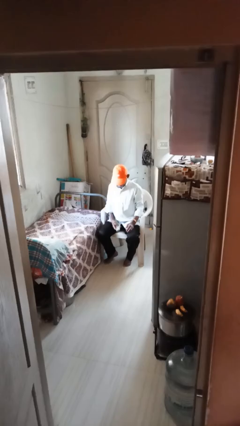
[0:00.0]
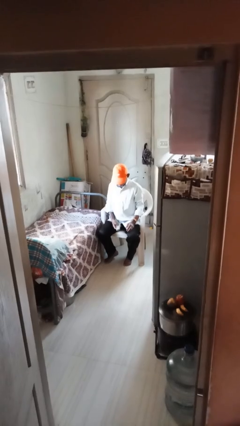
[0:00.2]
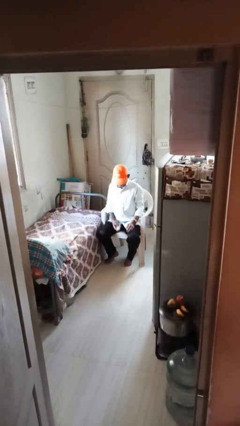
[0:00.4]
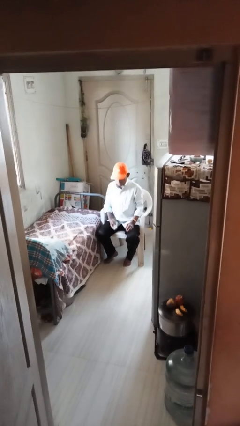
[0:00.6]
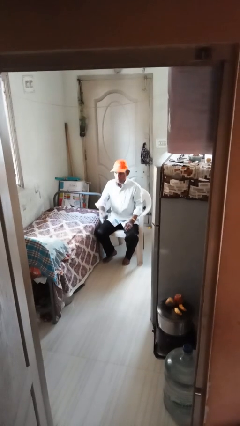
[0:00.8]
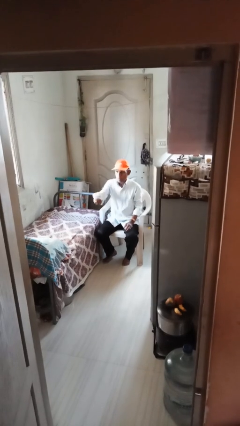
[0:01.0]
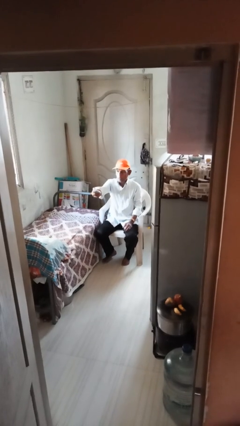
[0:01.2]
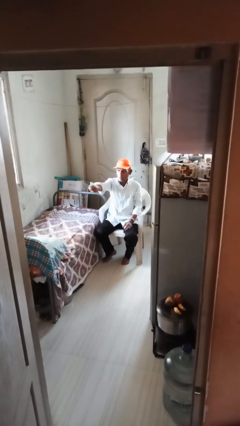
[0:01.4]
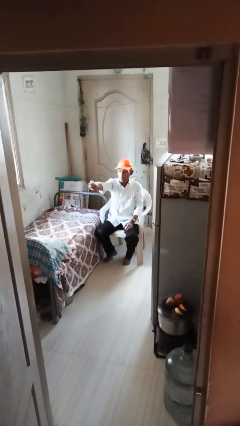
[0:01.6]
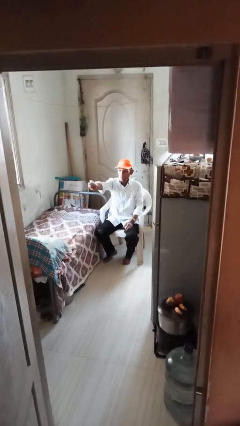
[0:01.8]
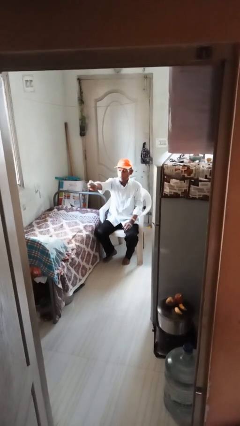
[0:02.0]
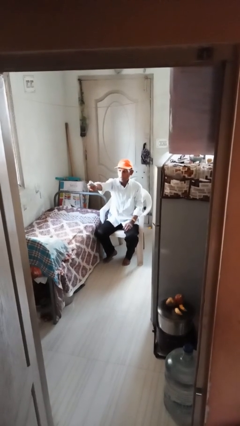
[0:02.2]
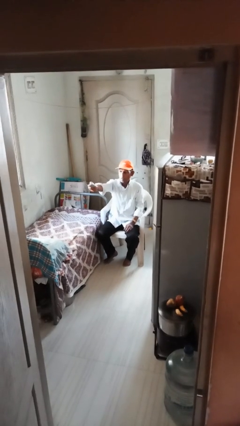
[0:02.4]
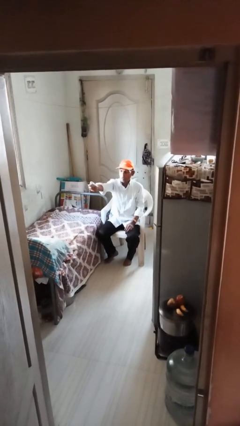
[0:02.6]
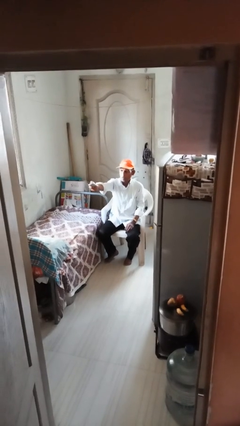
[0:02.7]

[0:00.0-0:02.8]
person uses television remote

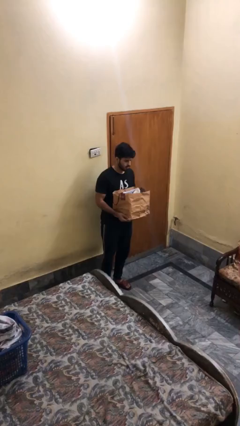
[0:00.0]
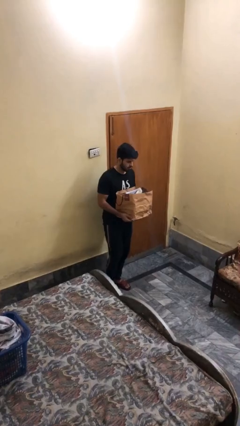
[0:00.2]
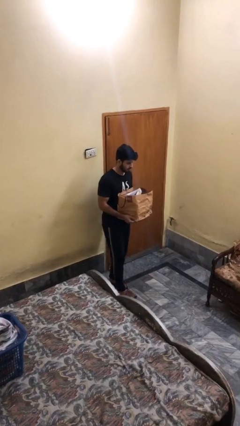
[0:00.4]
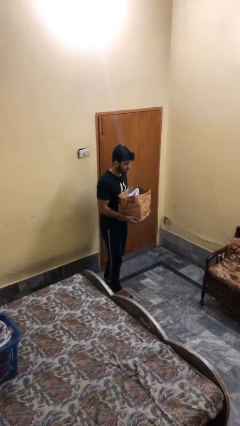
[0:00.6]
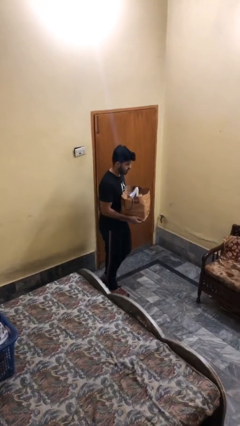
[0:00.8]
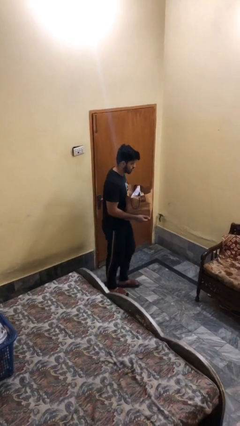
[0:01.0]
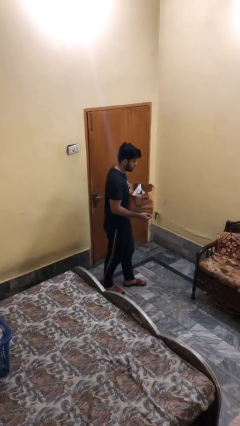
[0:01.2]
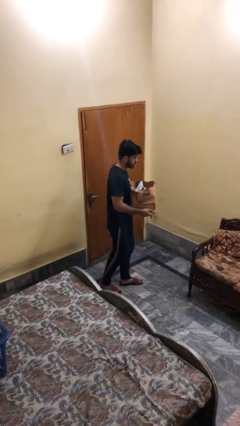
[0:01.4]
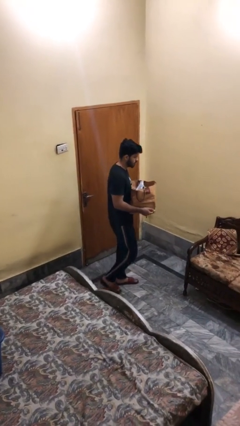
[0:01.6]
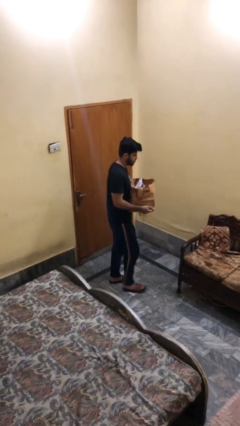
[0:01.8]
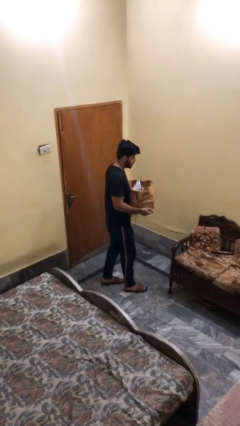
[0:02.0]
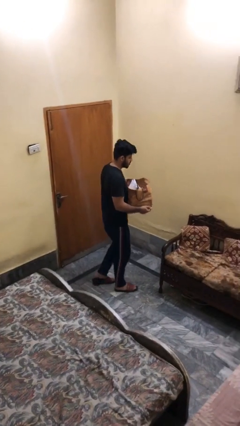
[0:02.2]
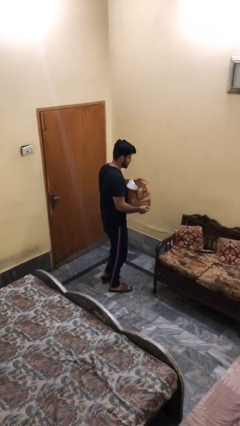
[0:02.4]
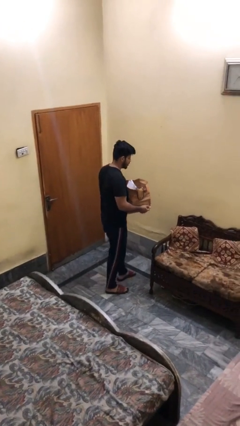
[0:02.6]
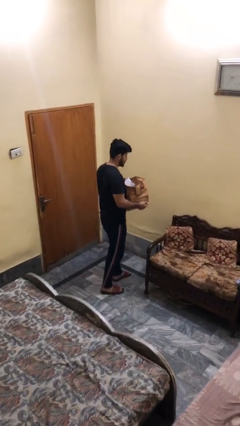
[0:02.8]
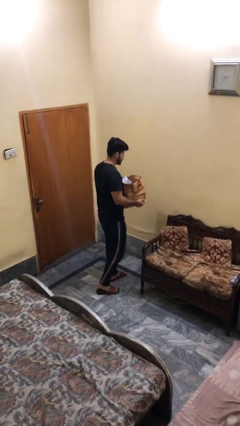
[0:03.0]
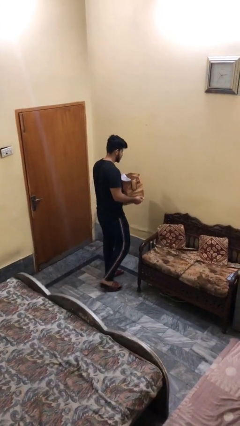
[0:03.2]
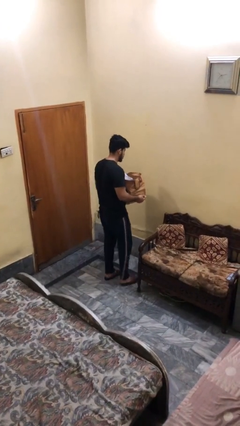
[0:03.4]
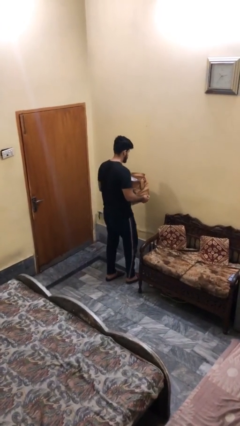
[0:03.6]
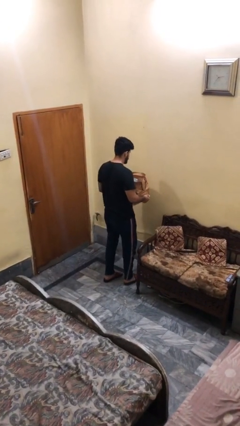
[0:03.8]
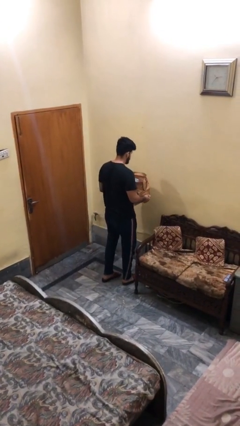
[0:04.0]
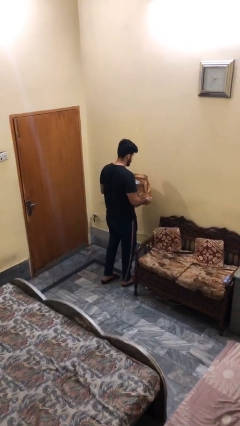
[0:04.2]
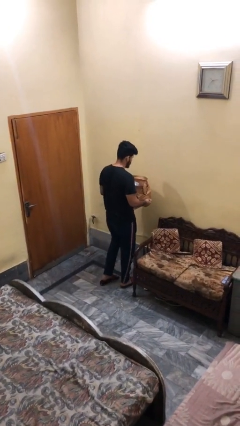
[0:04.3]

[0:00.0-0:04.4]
person carries groceries

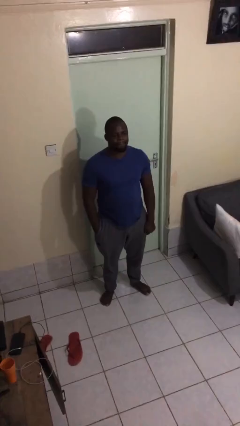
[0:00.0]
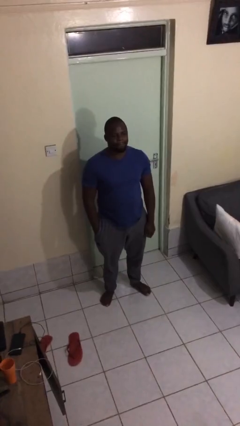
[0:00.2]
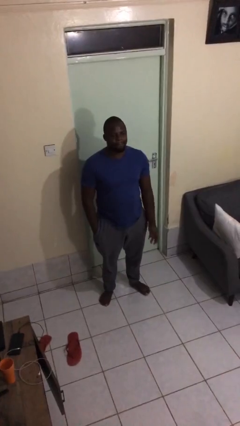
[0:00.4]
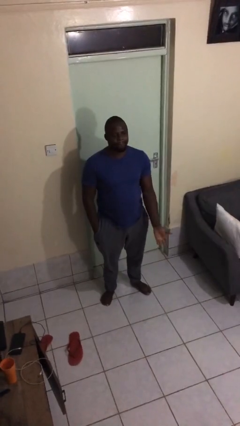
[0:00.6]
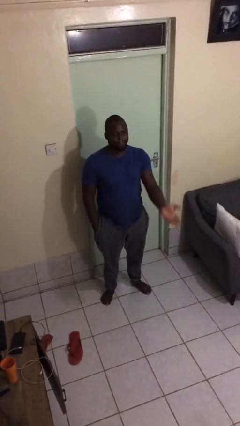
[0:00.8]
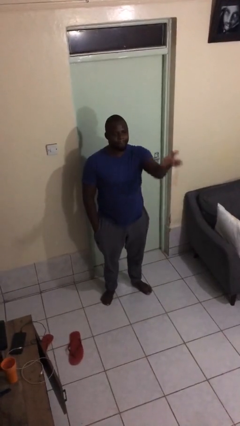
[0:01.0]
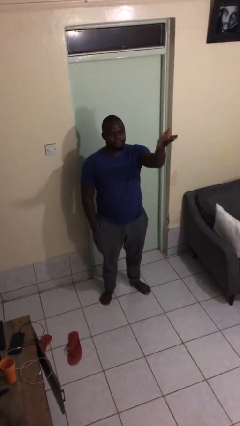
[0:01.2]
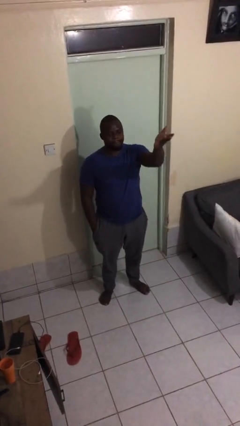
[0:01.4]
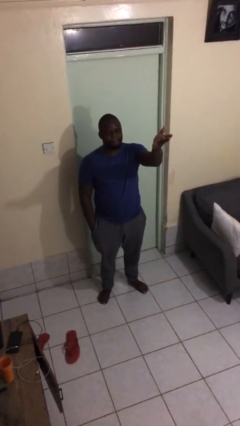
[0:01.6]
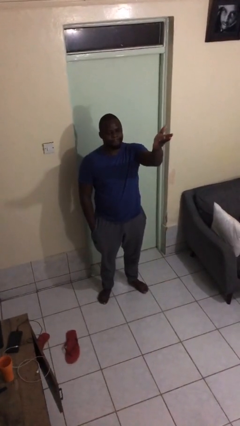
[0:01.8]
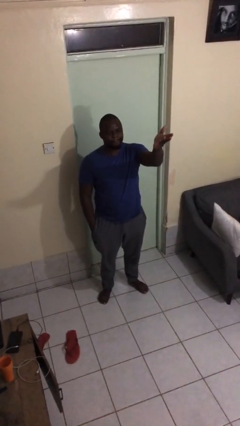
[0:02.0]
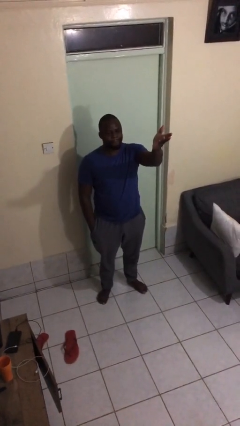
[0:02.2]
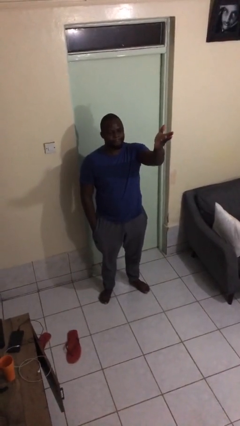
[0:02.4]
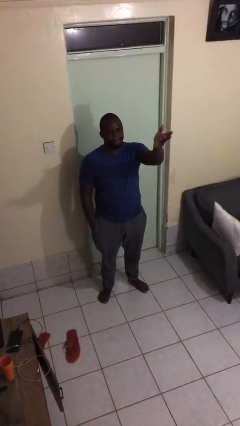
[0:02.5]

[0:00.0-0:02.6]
person gestures swipe up

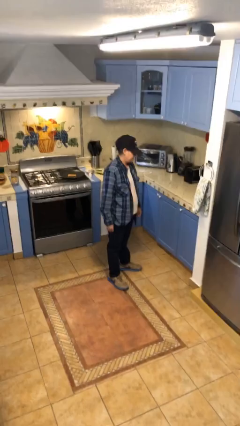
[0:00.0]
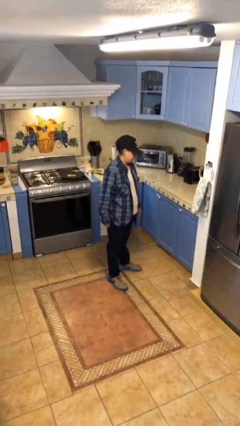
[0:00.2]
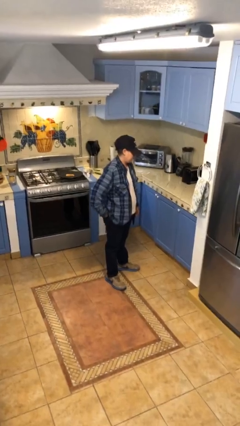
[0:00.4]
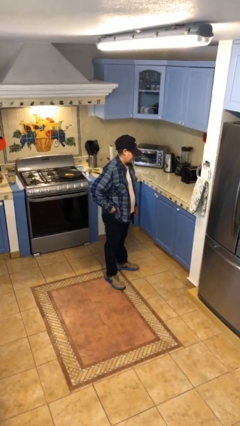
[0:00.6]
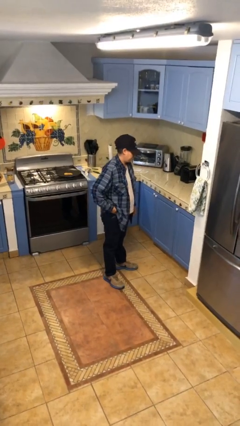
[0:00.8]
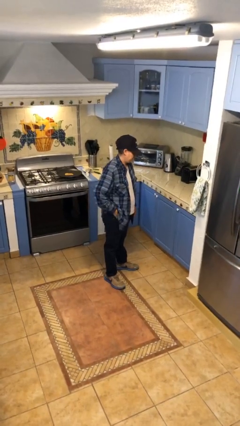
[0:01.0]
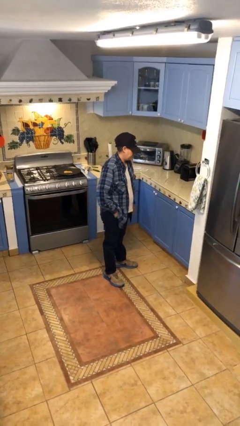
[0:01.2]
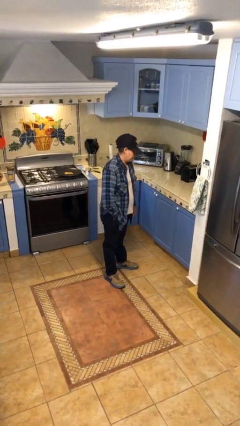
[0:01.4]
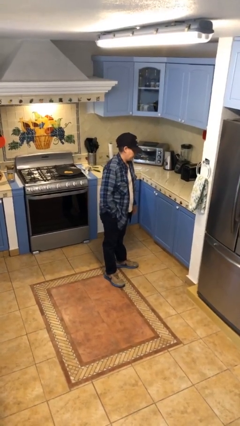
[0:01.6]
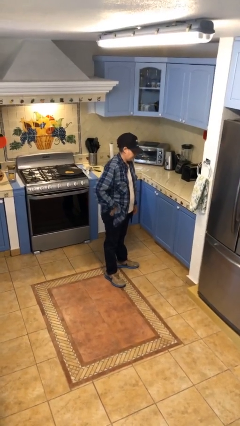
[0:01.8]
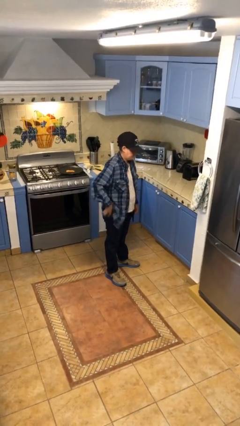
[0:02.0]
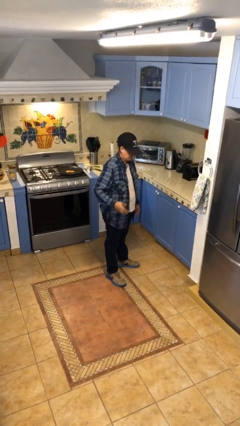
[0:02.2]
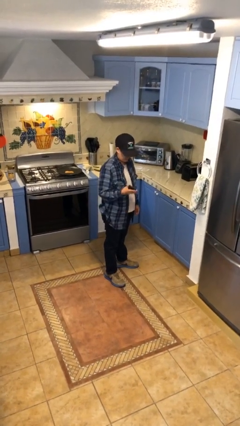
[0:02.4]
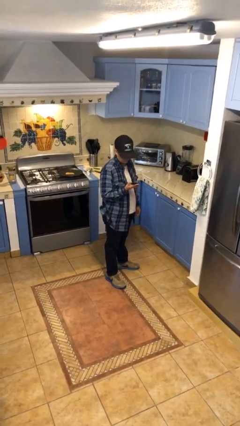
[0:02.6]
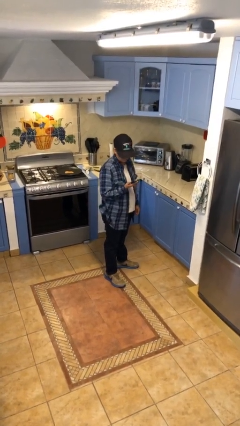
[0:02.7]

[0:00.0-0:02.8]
person takes phone from pocket

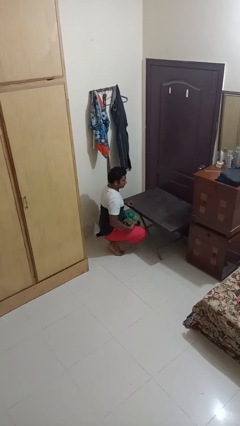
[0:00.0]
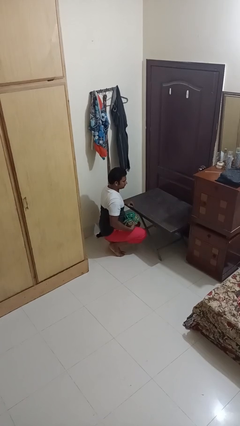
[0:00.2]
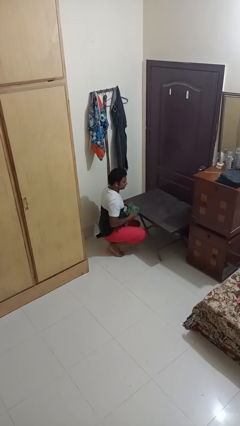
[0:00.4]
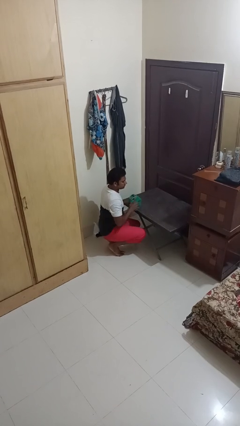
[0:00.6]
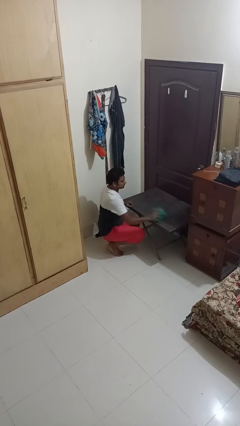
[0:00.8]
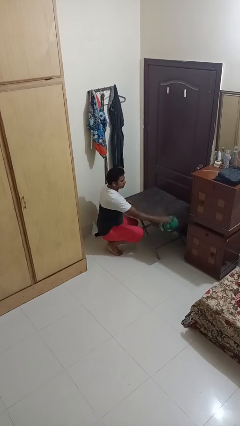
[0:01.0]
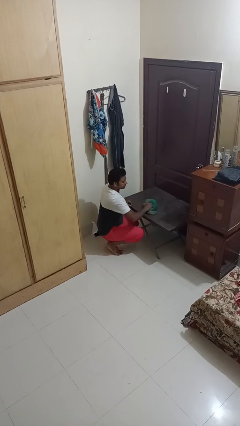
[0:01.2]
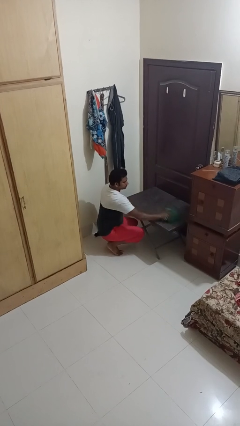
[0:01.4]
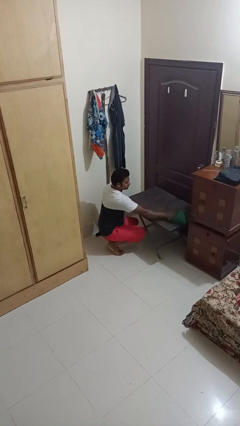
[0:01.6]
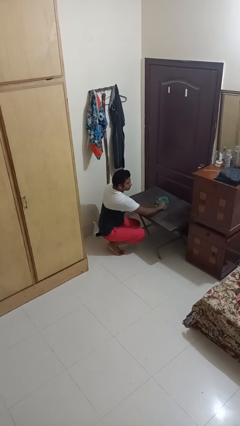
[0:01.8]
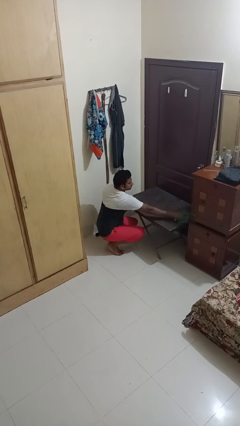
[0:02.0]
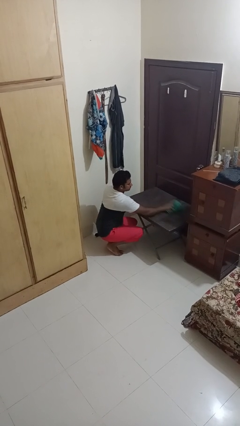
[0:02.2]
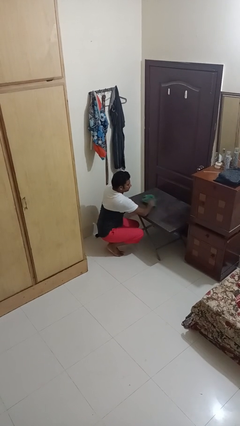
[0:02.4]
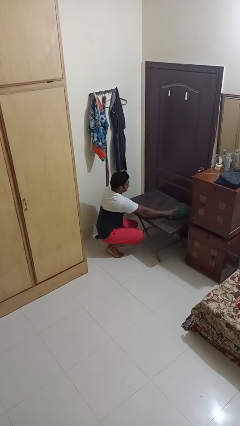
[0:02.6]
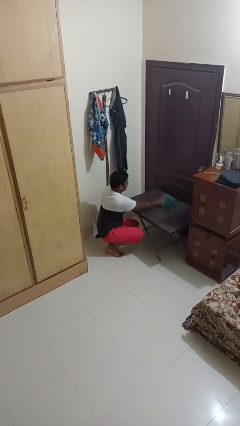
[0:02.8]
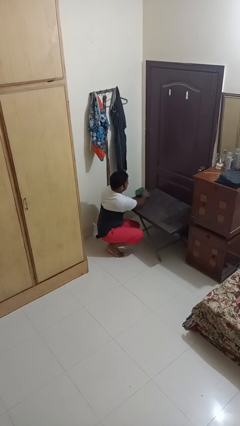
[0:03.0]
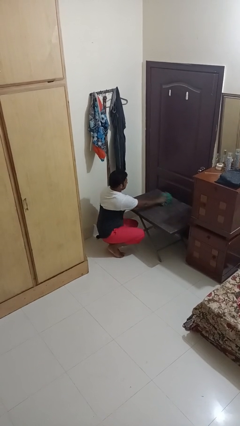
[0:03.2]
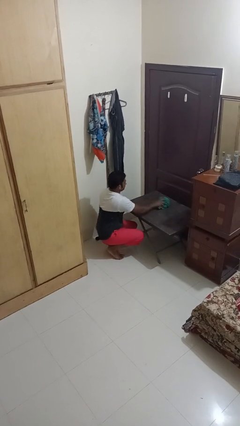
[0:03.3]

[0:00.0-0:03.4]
person cleans table with rag

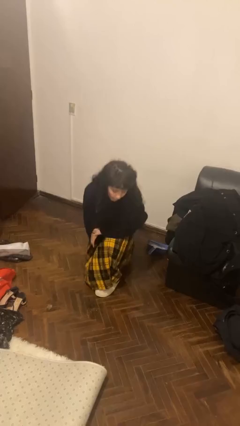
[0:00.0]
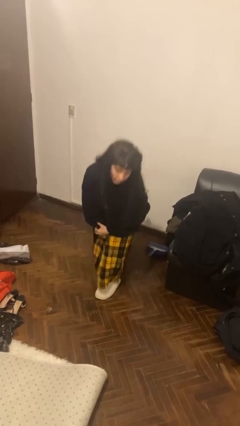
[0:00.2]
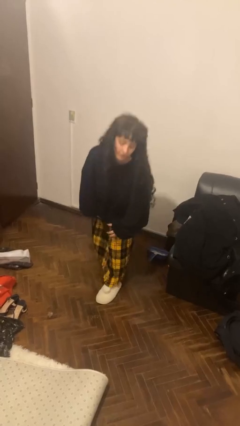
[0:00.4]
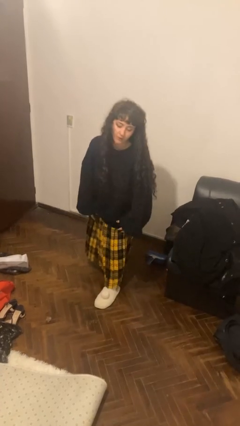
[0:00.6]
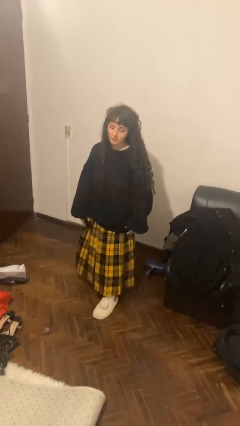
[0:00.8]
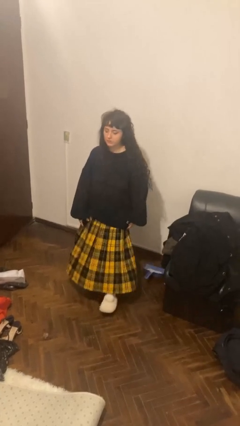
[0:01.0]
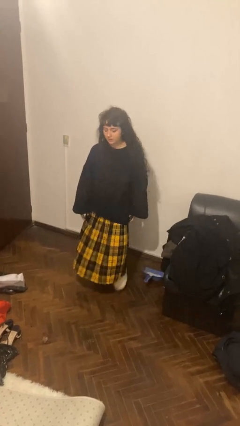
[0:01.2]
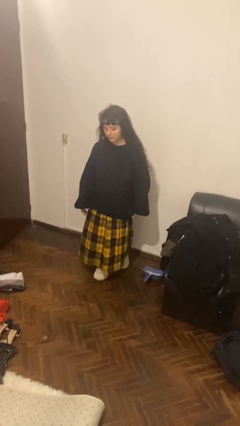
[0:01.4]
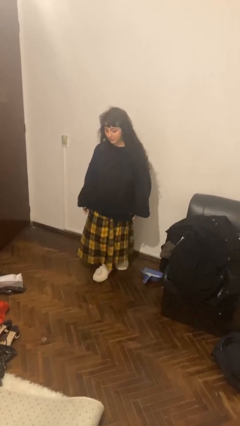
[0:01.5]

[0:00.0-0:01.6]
person stands up from floor
